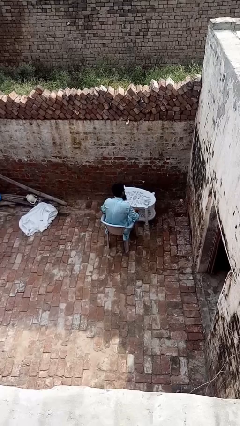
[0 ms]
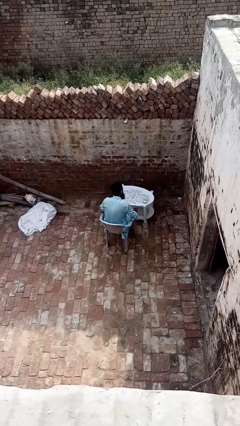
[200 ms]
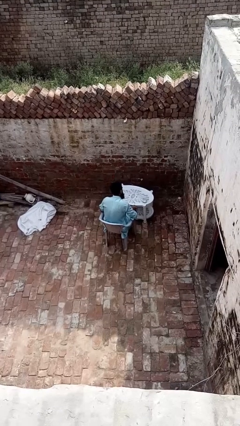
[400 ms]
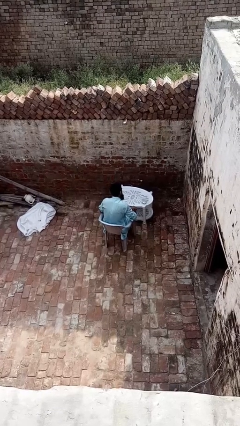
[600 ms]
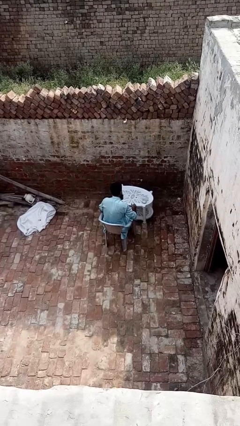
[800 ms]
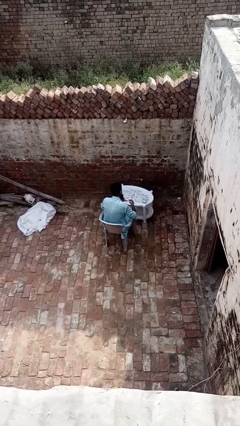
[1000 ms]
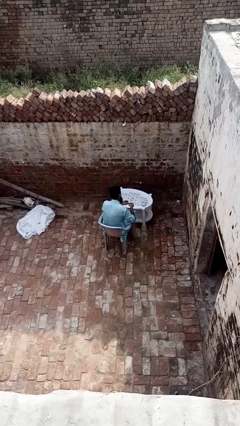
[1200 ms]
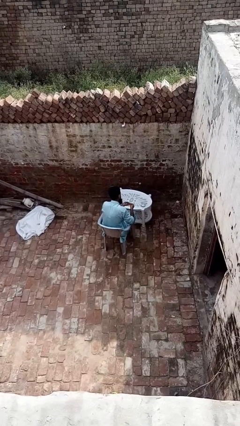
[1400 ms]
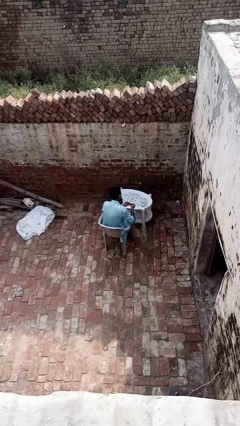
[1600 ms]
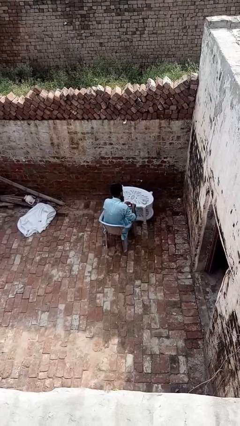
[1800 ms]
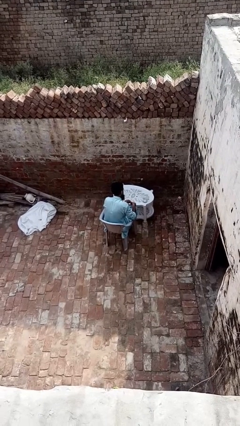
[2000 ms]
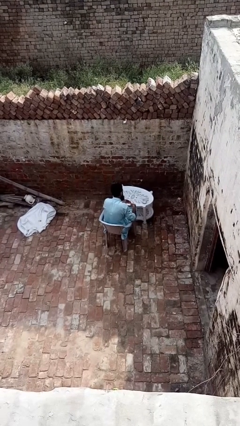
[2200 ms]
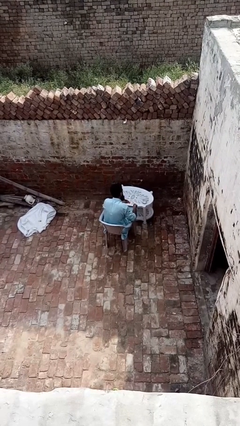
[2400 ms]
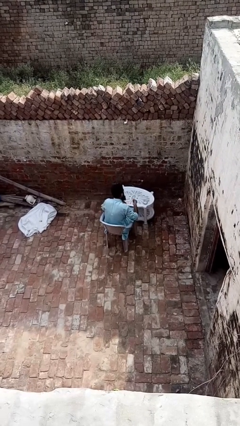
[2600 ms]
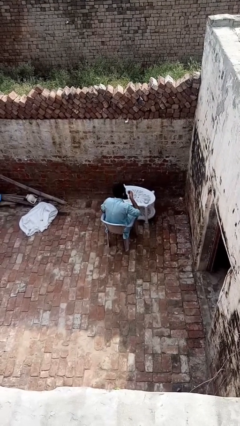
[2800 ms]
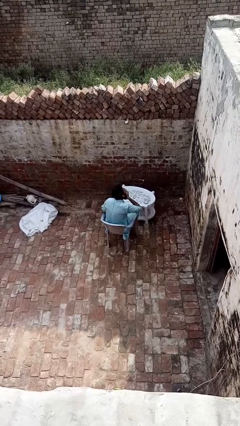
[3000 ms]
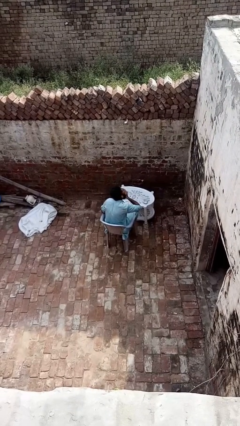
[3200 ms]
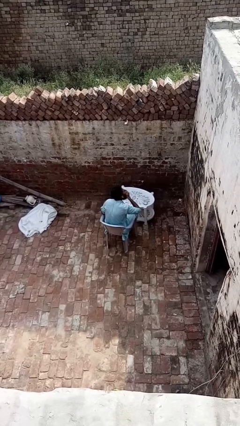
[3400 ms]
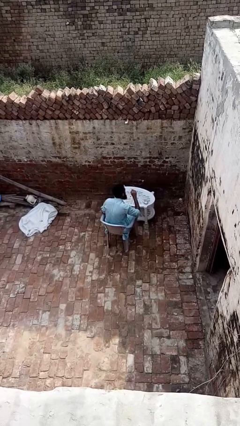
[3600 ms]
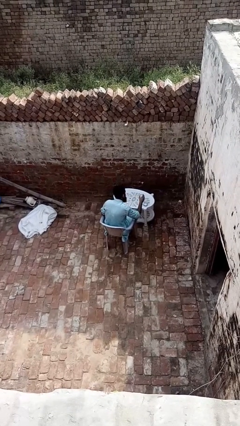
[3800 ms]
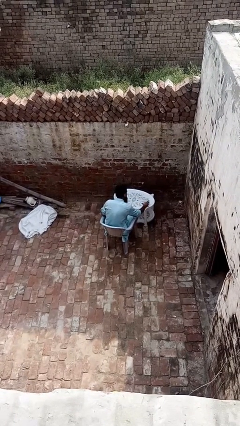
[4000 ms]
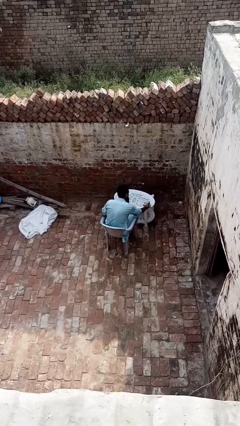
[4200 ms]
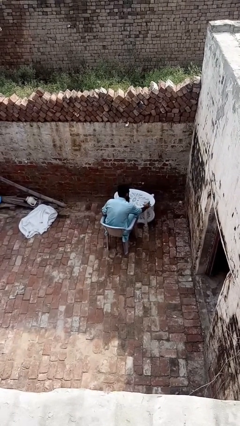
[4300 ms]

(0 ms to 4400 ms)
person takes medicine pills

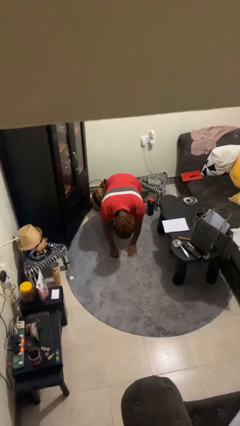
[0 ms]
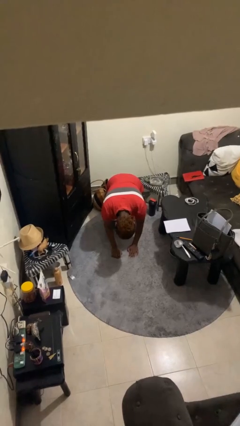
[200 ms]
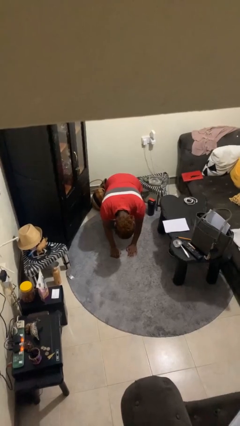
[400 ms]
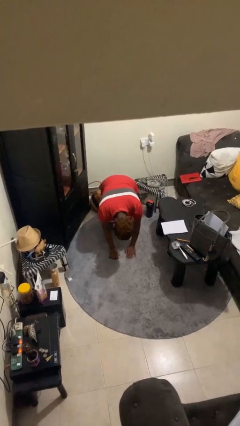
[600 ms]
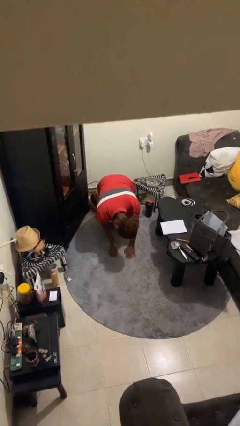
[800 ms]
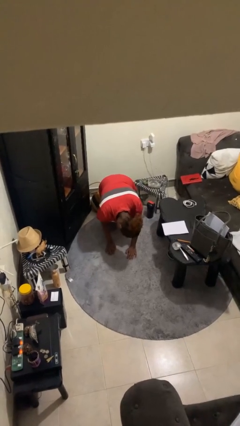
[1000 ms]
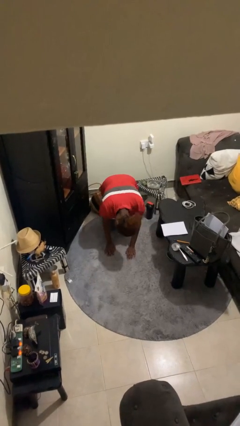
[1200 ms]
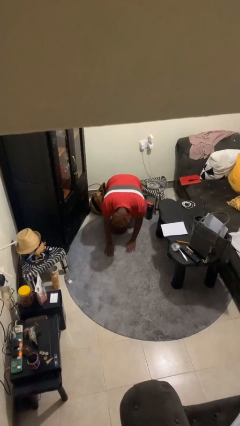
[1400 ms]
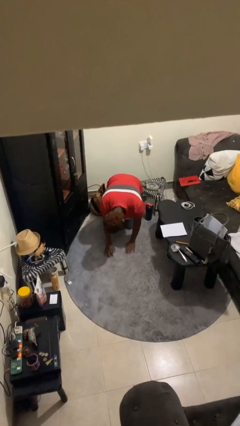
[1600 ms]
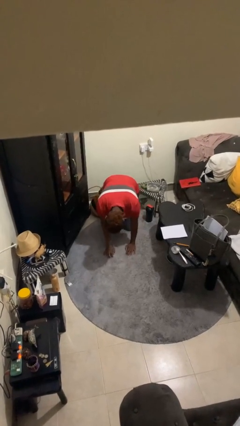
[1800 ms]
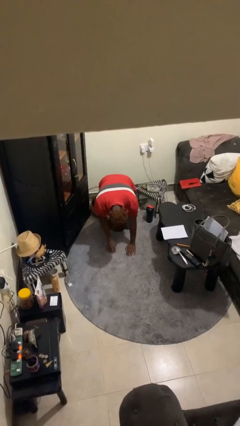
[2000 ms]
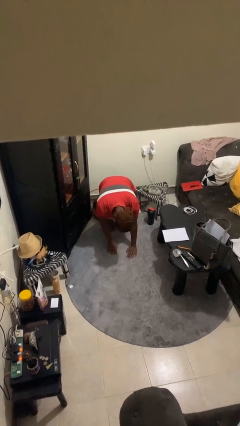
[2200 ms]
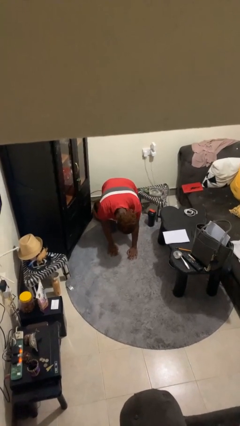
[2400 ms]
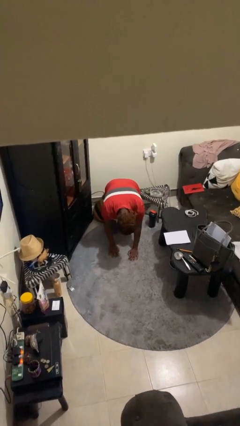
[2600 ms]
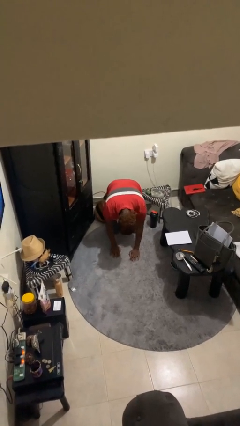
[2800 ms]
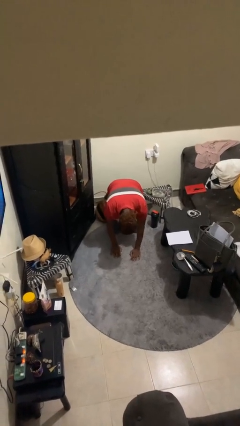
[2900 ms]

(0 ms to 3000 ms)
person crawls

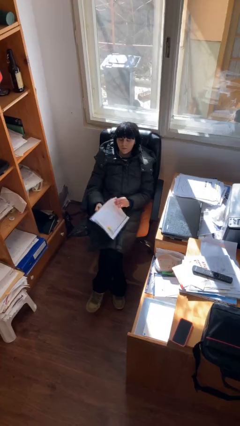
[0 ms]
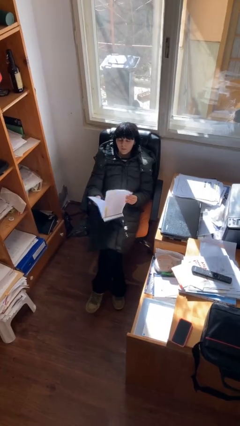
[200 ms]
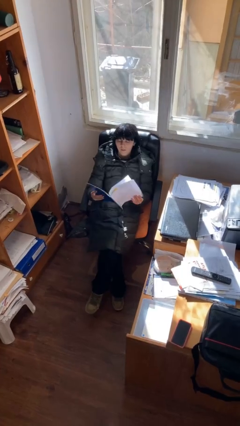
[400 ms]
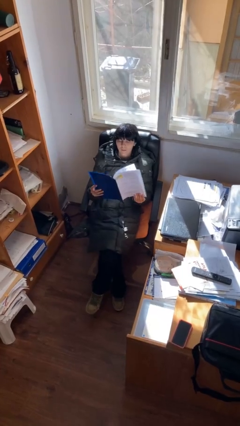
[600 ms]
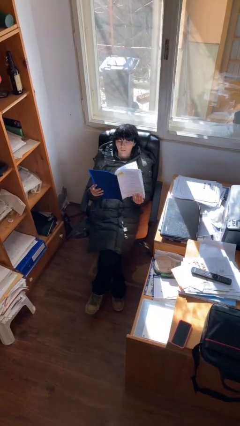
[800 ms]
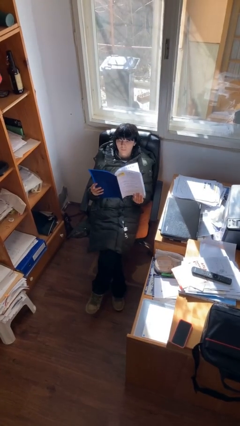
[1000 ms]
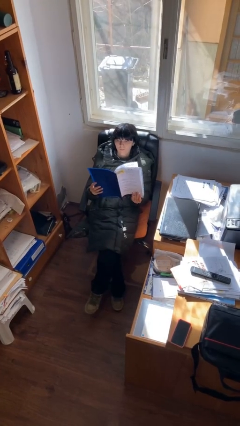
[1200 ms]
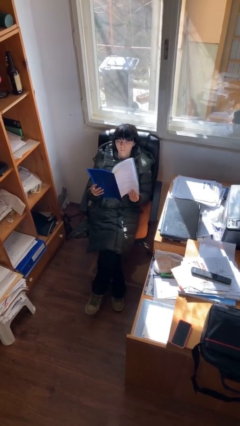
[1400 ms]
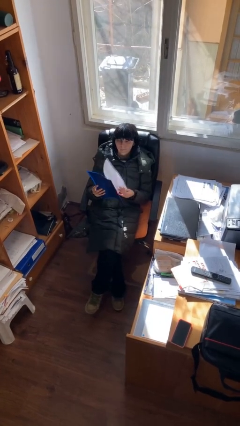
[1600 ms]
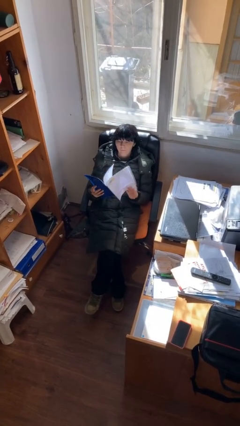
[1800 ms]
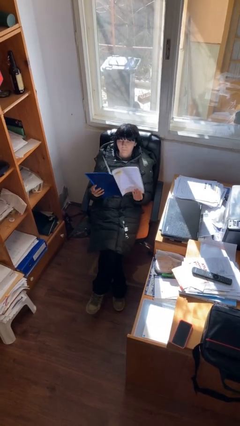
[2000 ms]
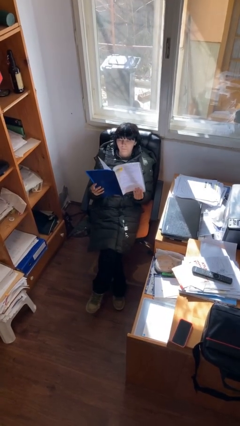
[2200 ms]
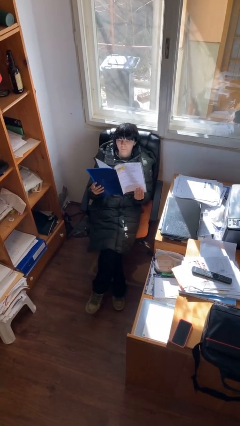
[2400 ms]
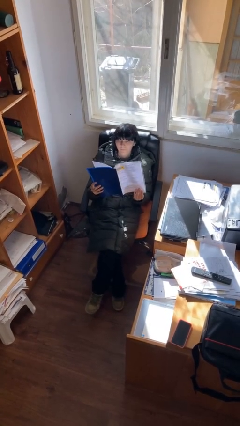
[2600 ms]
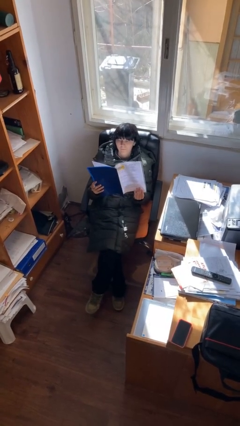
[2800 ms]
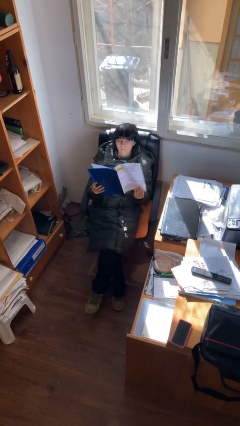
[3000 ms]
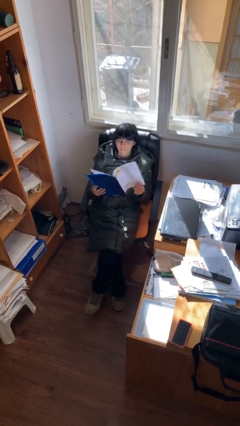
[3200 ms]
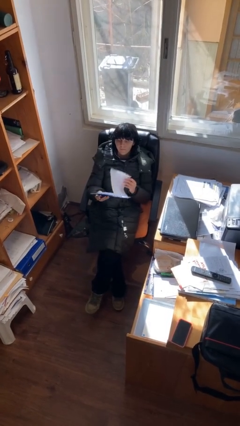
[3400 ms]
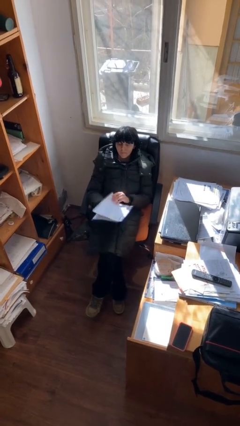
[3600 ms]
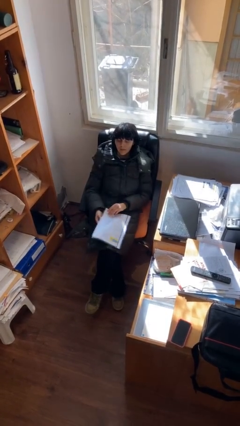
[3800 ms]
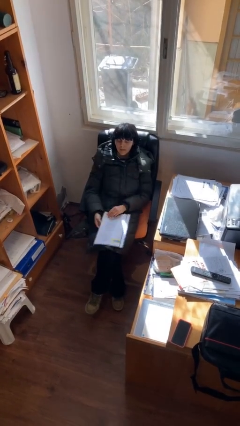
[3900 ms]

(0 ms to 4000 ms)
person reads document

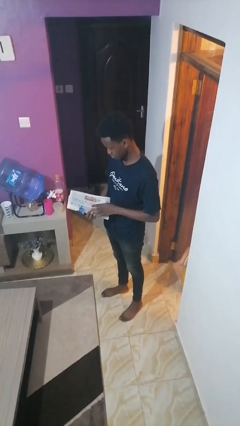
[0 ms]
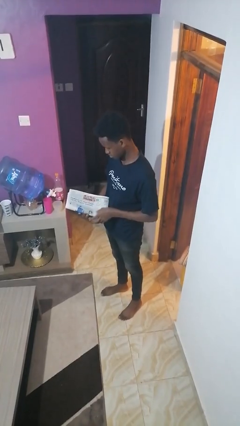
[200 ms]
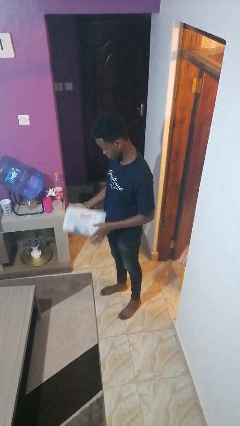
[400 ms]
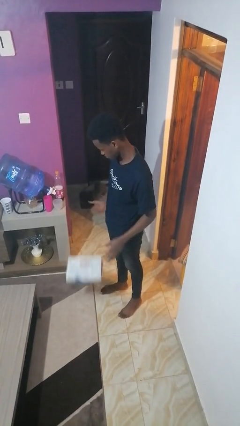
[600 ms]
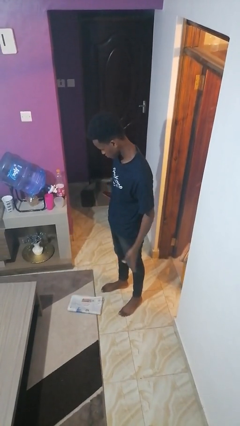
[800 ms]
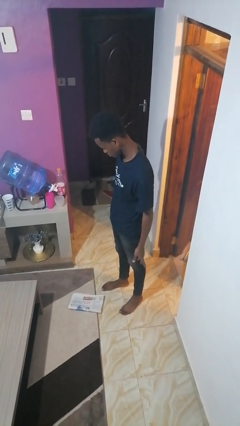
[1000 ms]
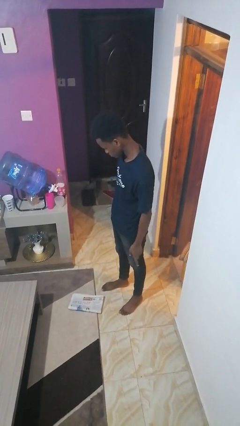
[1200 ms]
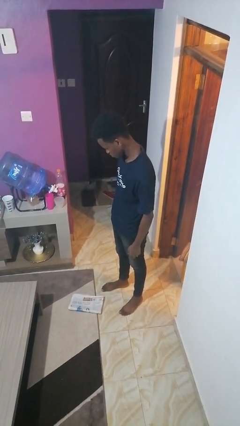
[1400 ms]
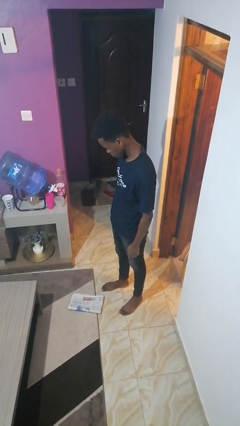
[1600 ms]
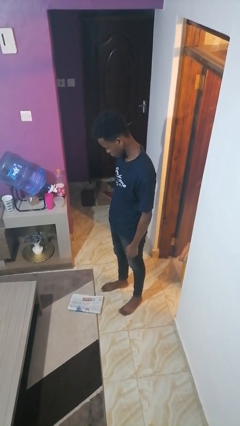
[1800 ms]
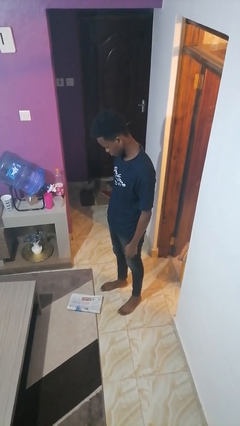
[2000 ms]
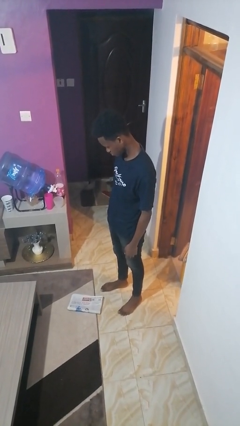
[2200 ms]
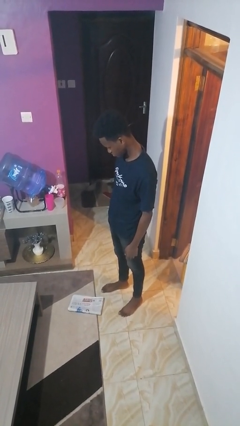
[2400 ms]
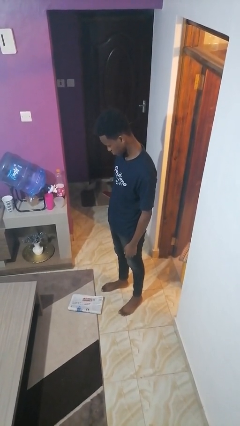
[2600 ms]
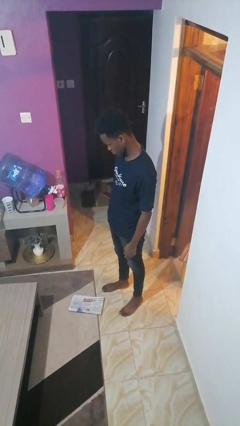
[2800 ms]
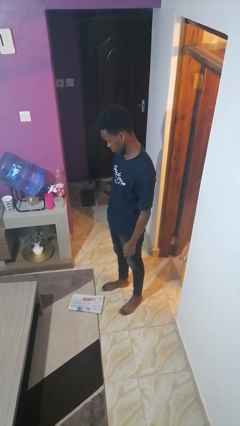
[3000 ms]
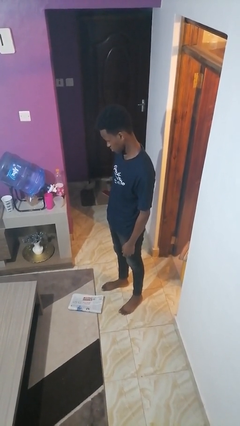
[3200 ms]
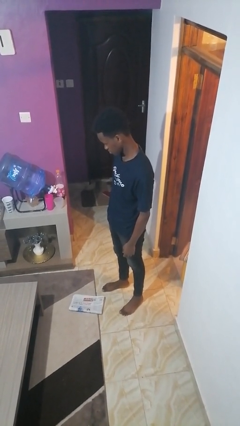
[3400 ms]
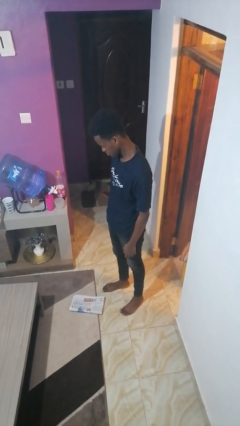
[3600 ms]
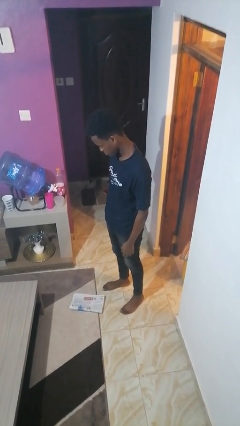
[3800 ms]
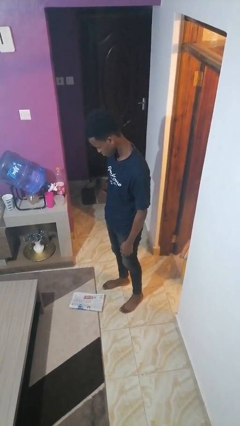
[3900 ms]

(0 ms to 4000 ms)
person drops object

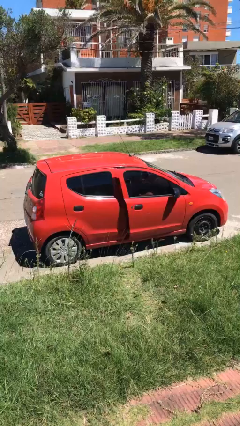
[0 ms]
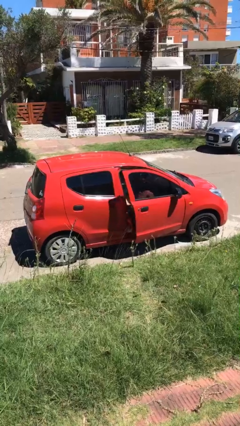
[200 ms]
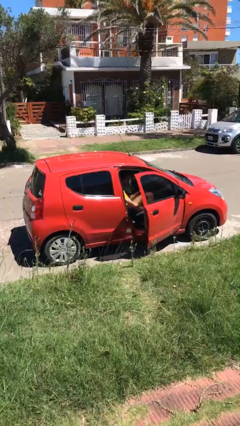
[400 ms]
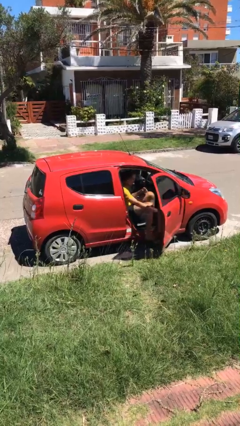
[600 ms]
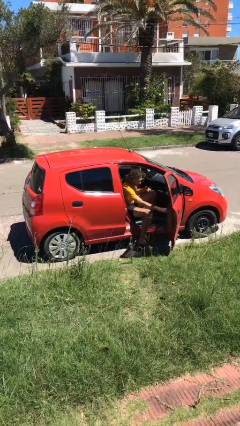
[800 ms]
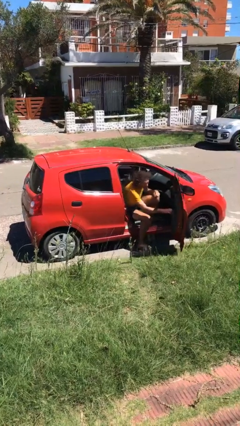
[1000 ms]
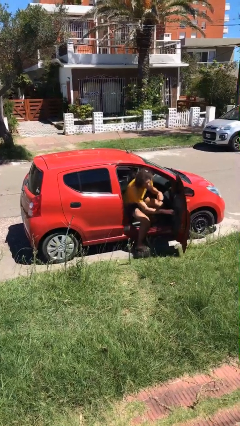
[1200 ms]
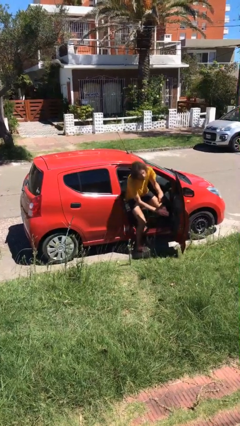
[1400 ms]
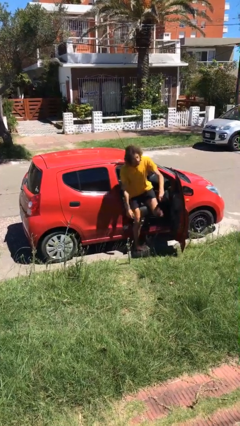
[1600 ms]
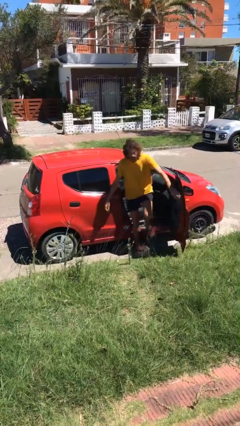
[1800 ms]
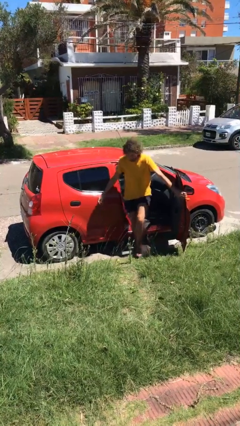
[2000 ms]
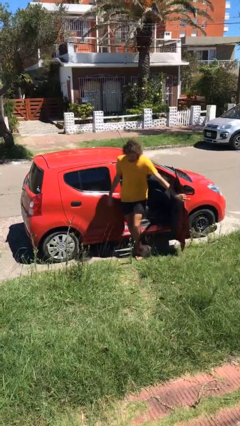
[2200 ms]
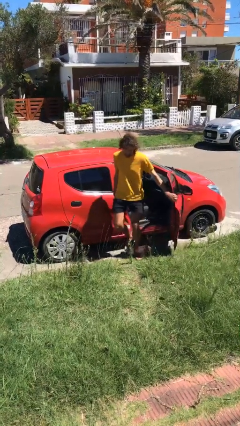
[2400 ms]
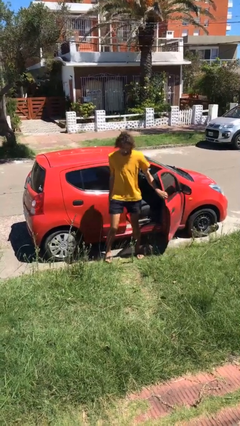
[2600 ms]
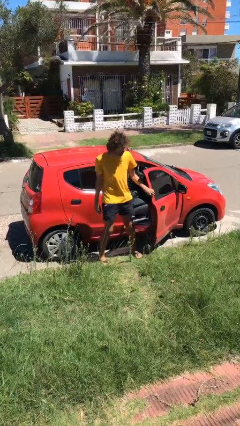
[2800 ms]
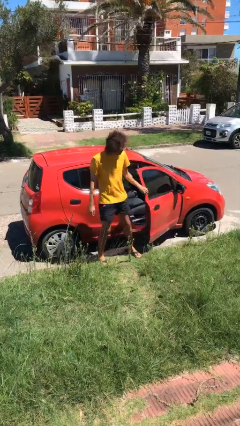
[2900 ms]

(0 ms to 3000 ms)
car drops off person
